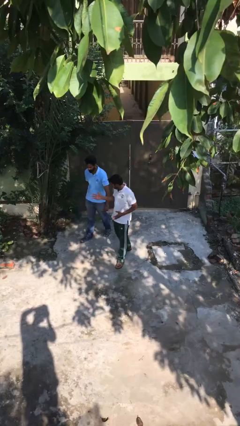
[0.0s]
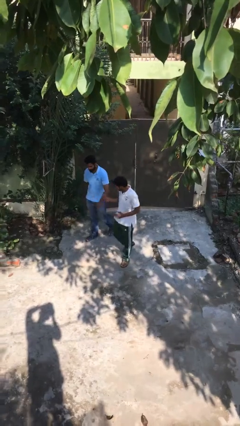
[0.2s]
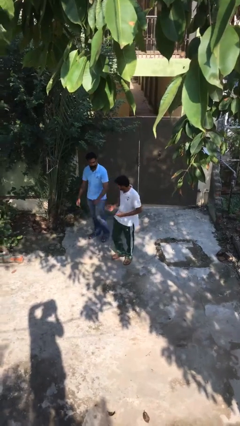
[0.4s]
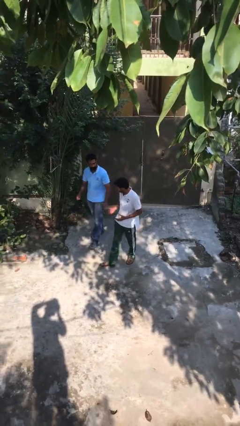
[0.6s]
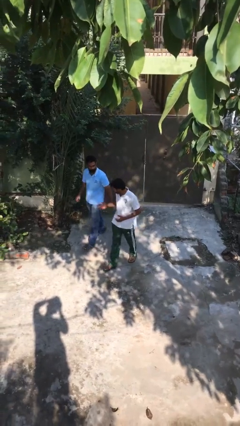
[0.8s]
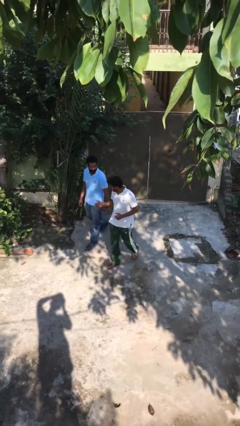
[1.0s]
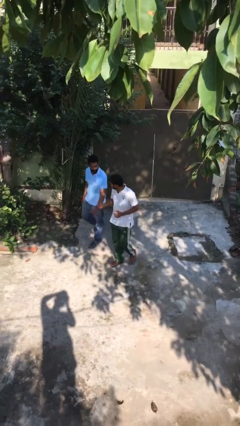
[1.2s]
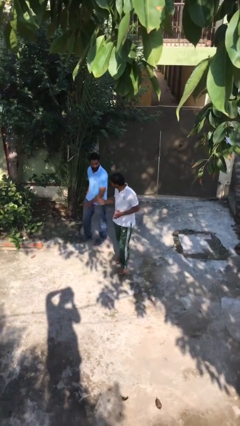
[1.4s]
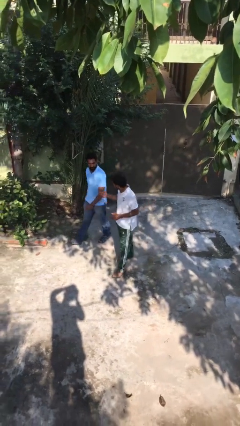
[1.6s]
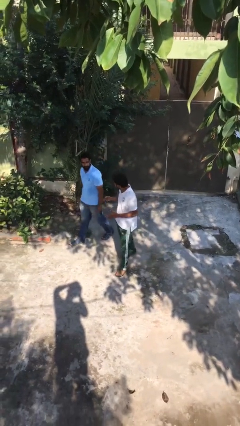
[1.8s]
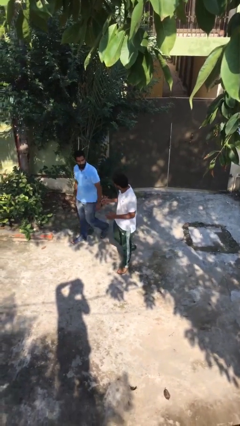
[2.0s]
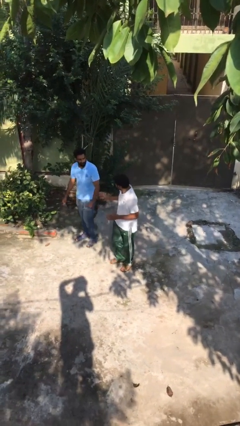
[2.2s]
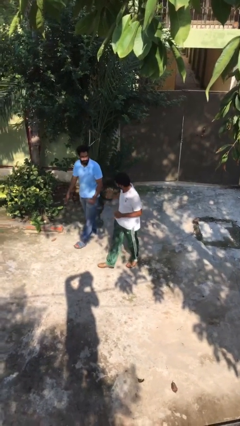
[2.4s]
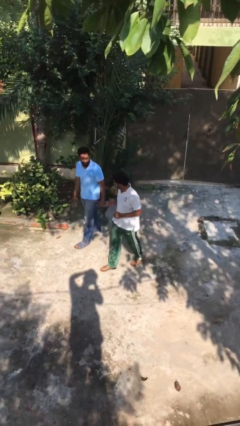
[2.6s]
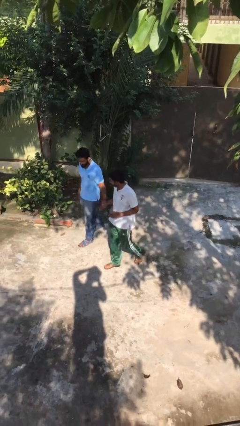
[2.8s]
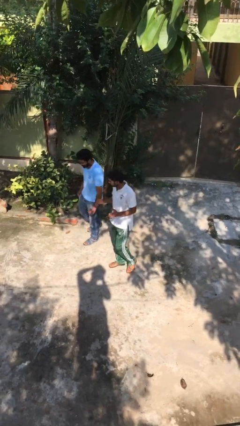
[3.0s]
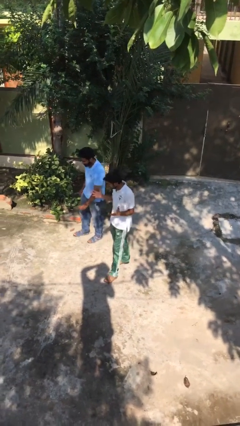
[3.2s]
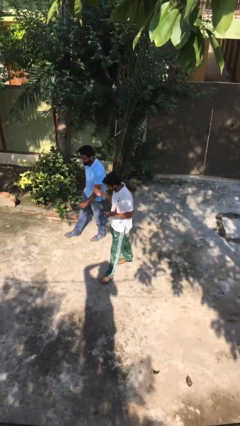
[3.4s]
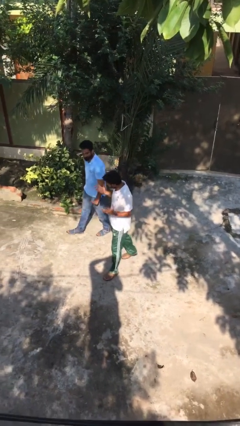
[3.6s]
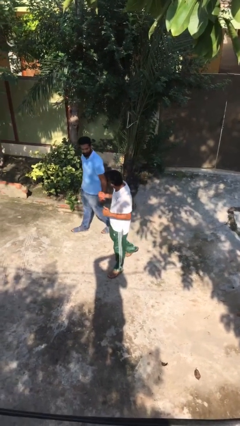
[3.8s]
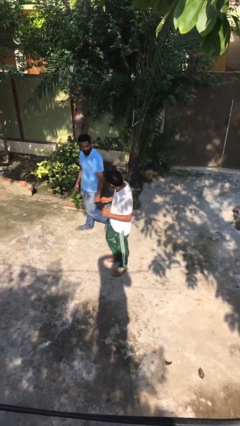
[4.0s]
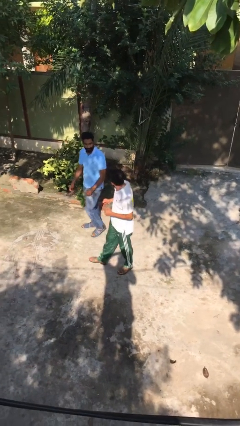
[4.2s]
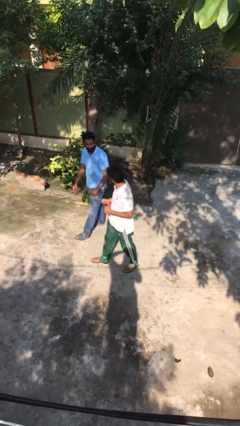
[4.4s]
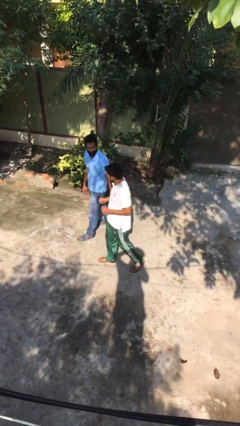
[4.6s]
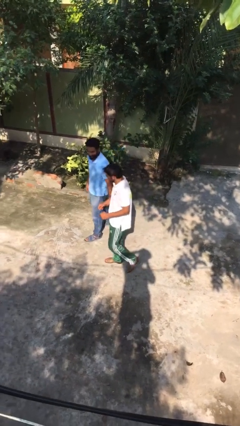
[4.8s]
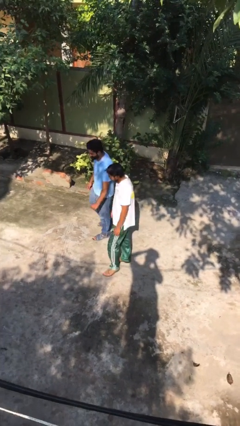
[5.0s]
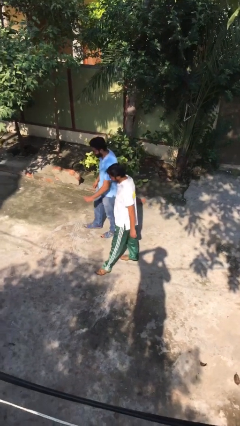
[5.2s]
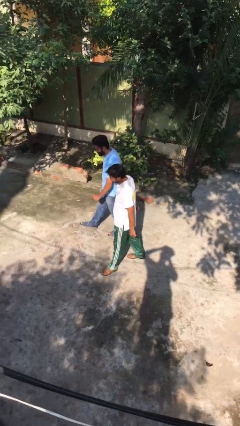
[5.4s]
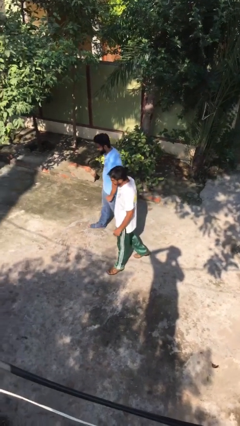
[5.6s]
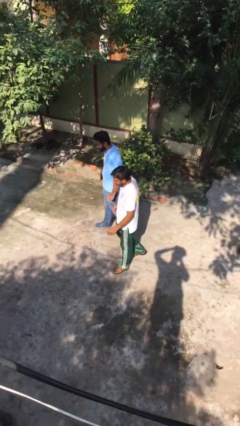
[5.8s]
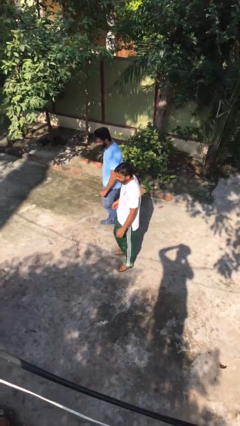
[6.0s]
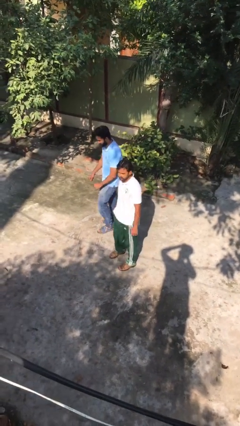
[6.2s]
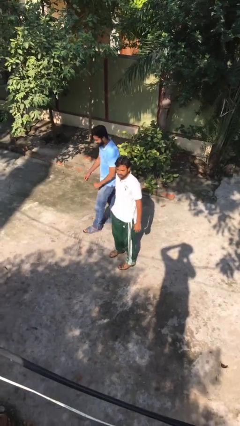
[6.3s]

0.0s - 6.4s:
person talks to person

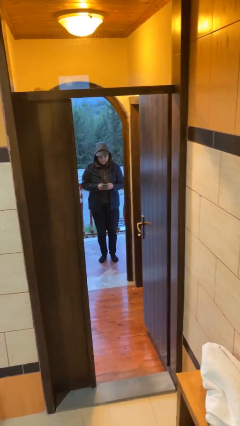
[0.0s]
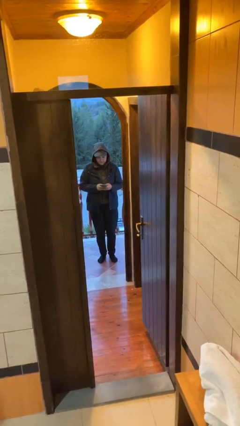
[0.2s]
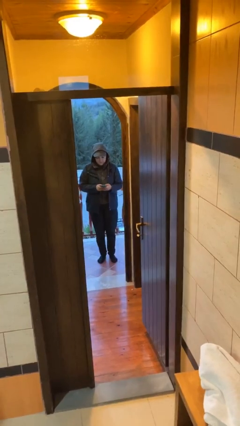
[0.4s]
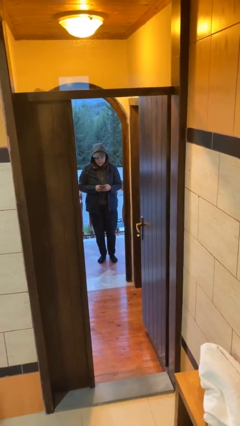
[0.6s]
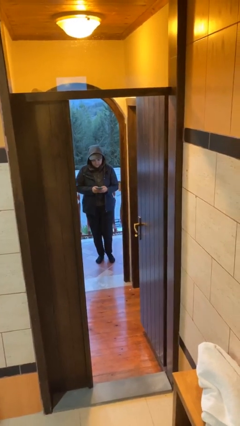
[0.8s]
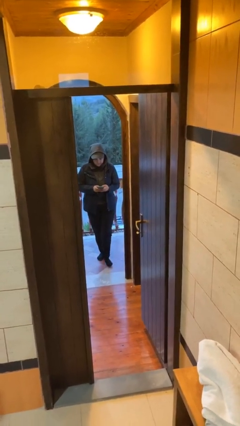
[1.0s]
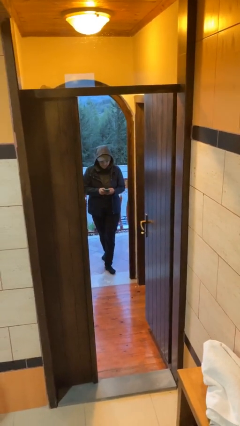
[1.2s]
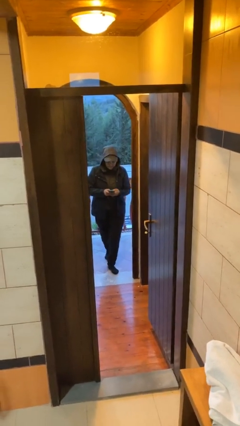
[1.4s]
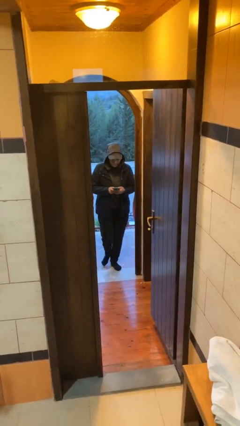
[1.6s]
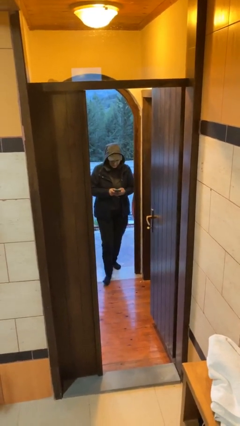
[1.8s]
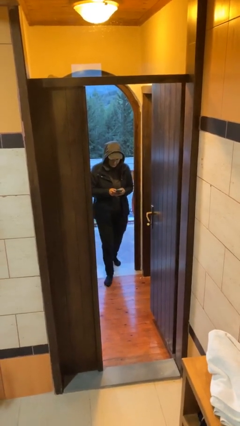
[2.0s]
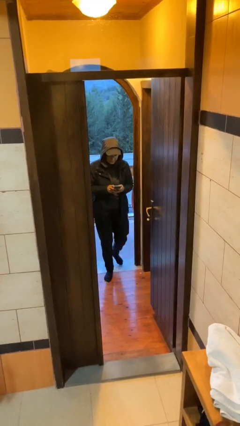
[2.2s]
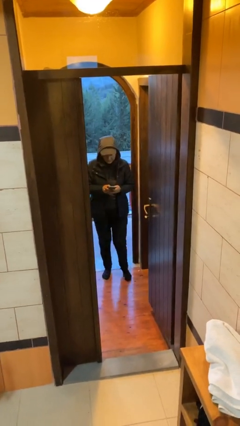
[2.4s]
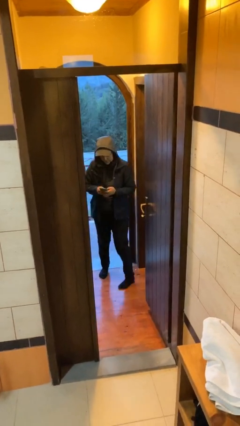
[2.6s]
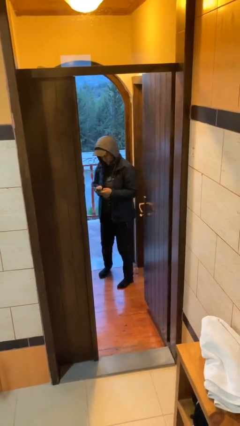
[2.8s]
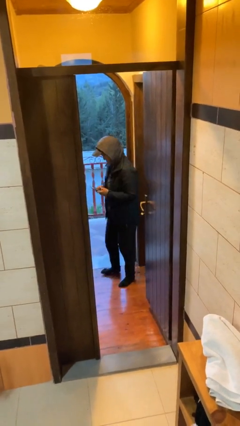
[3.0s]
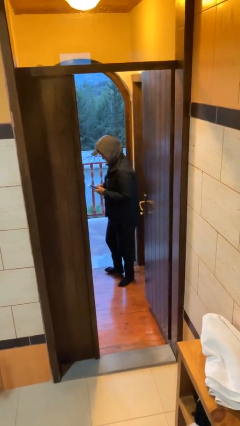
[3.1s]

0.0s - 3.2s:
person enters scene through structure

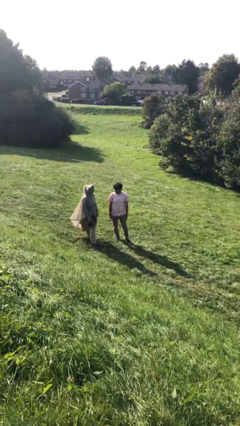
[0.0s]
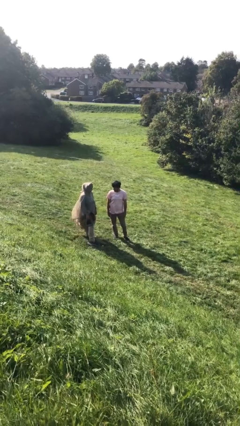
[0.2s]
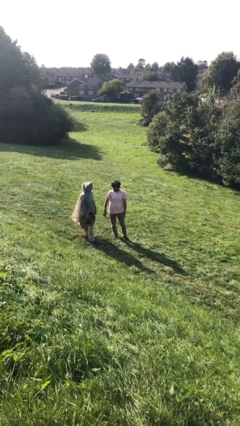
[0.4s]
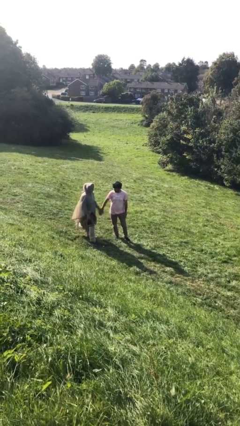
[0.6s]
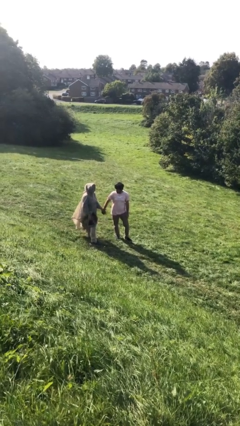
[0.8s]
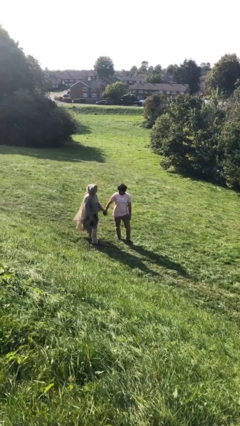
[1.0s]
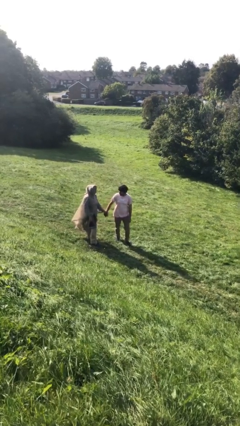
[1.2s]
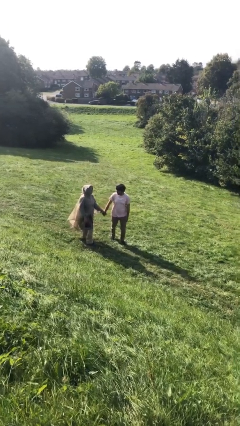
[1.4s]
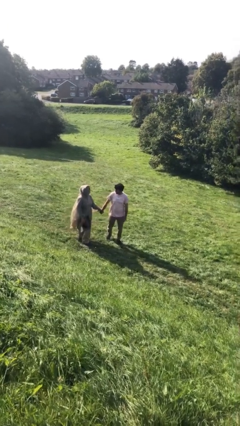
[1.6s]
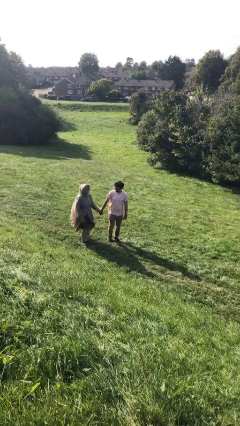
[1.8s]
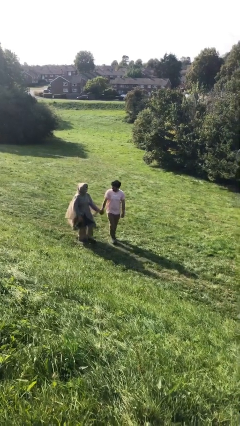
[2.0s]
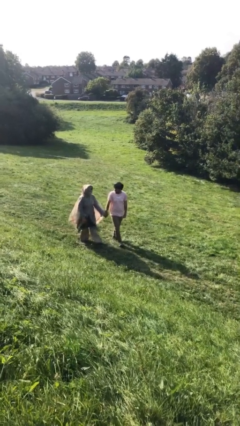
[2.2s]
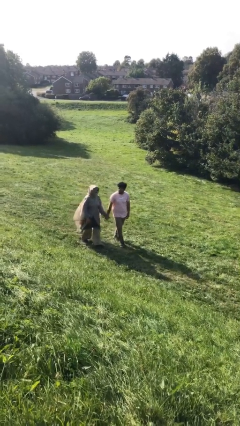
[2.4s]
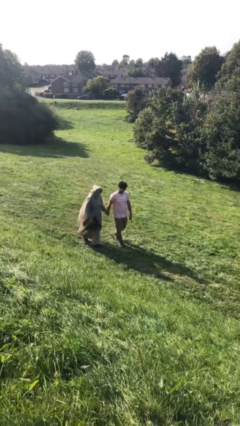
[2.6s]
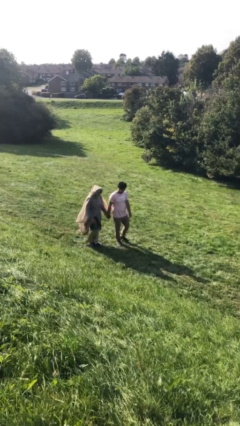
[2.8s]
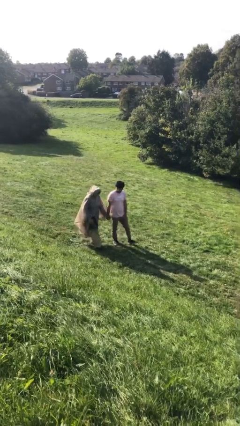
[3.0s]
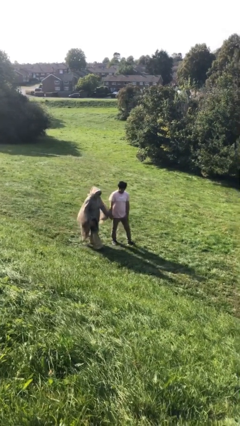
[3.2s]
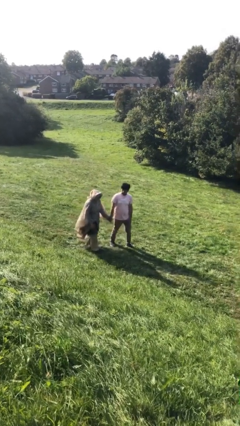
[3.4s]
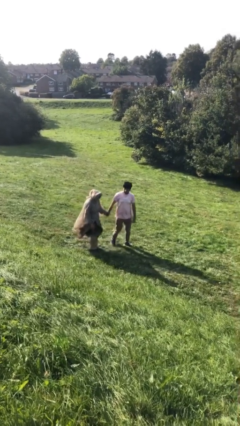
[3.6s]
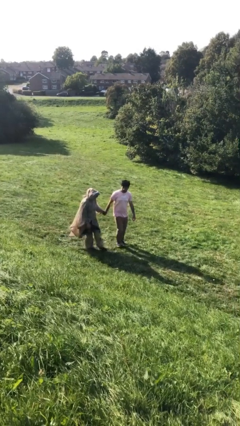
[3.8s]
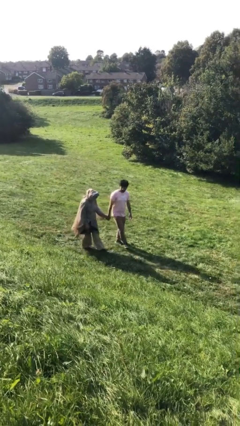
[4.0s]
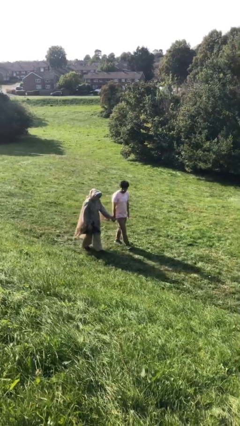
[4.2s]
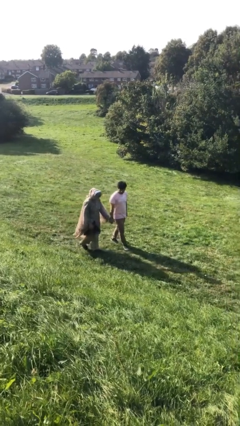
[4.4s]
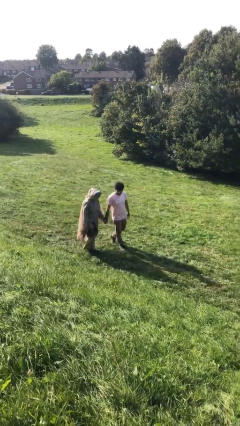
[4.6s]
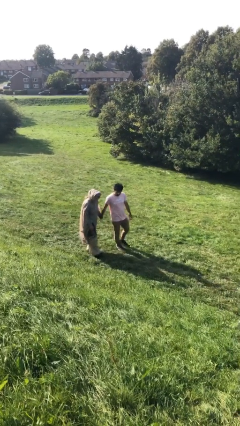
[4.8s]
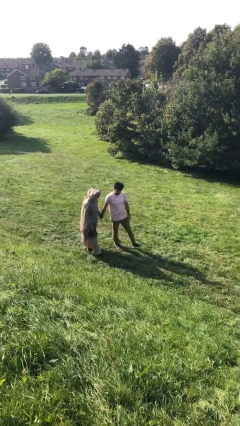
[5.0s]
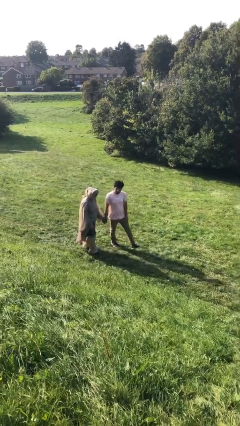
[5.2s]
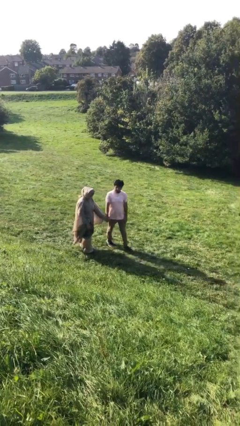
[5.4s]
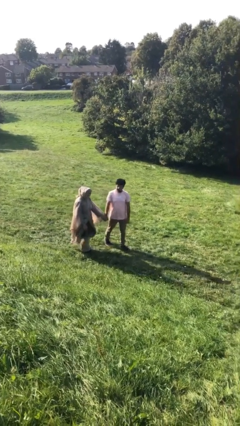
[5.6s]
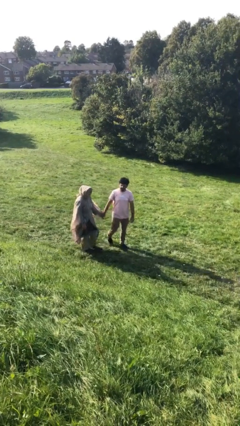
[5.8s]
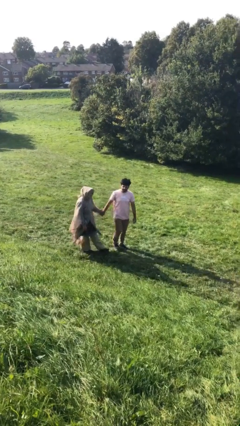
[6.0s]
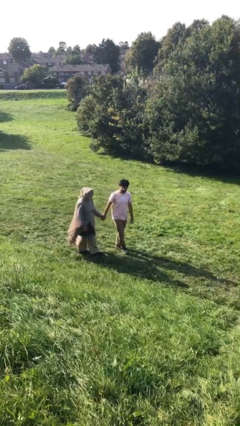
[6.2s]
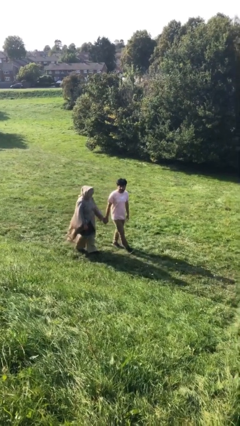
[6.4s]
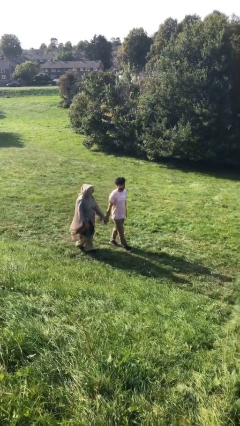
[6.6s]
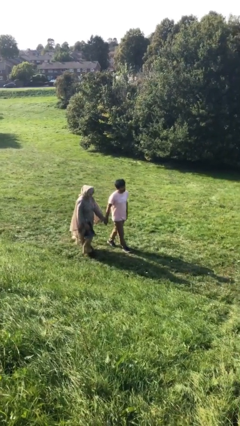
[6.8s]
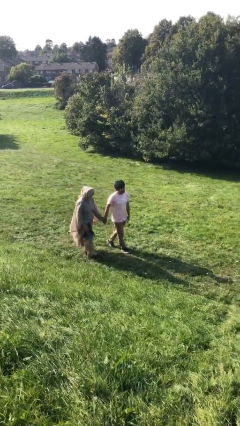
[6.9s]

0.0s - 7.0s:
person holds hand

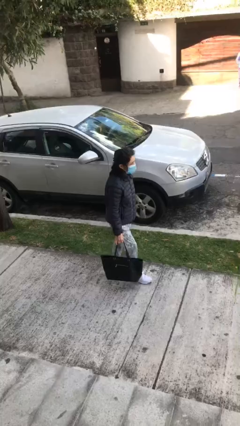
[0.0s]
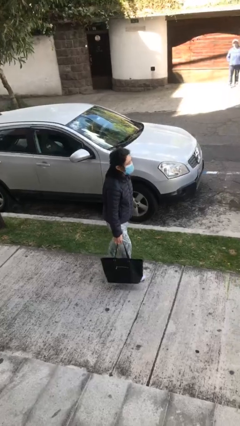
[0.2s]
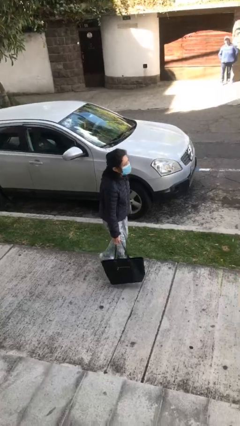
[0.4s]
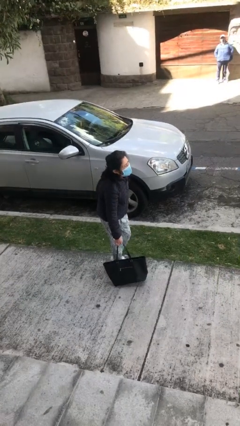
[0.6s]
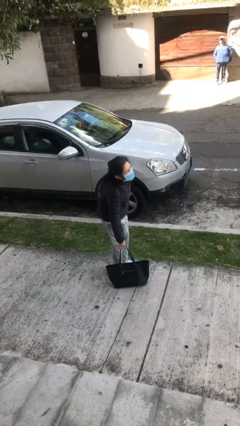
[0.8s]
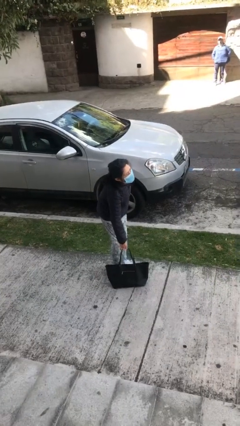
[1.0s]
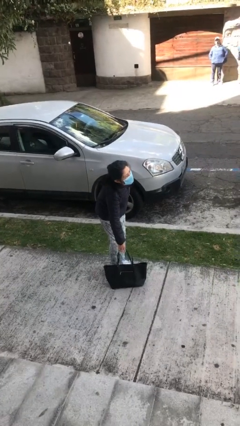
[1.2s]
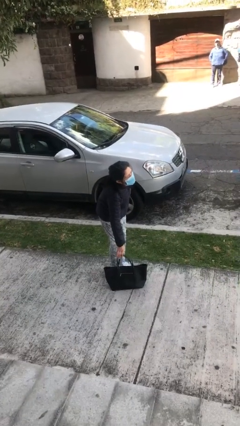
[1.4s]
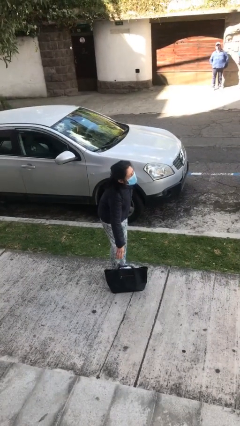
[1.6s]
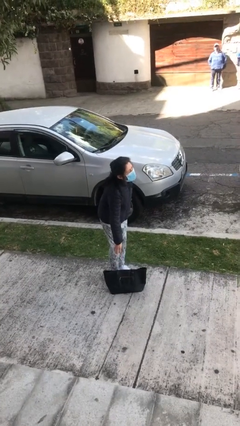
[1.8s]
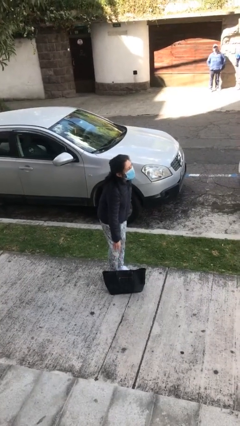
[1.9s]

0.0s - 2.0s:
person puts down object on floor
